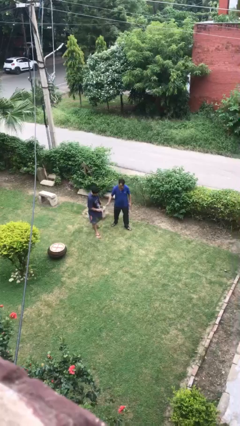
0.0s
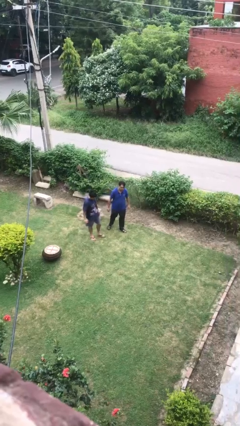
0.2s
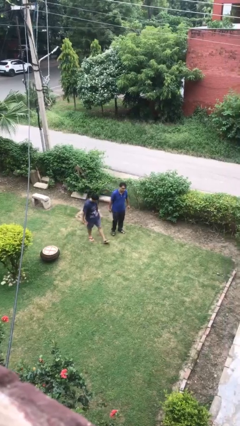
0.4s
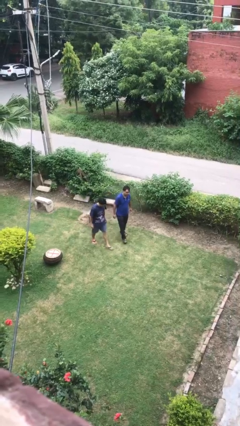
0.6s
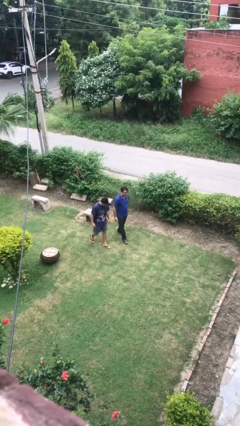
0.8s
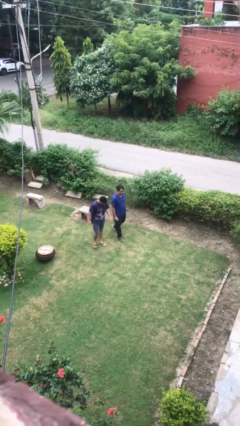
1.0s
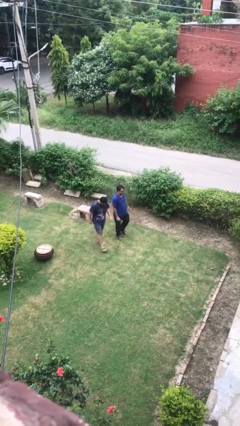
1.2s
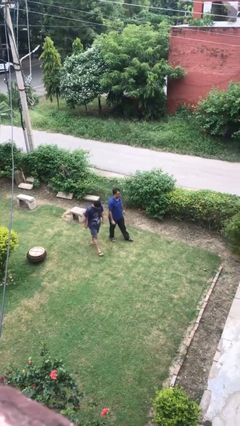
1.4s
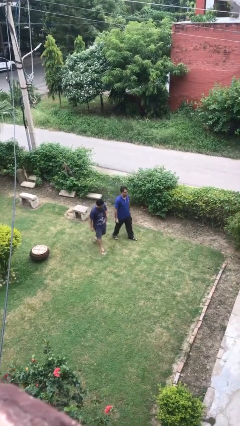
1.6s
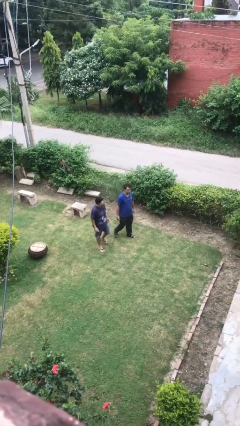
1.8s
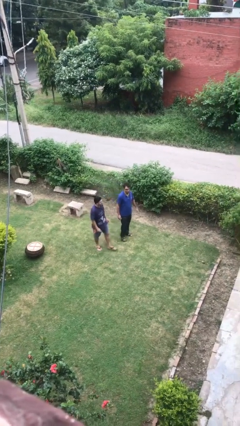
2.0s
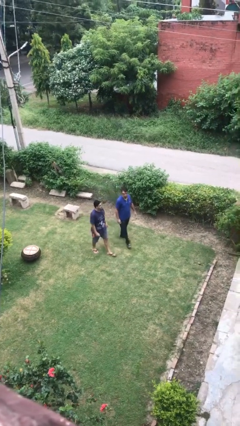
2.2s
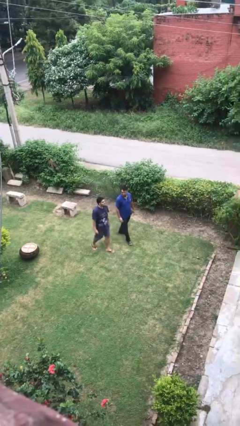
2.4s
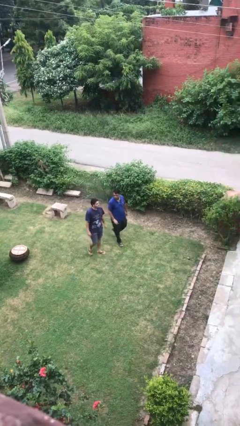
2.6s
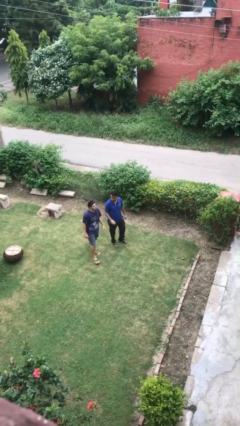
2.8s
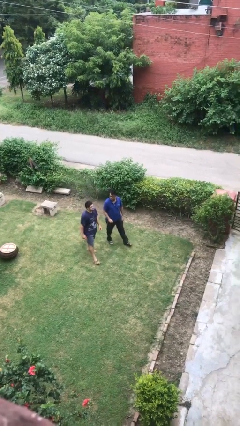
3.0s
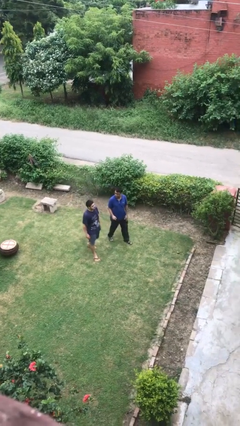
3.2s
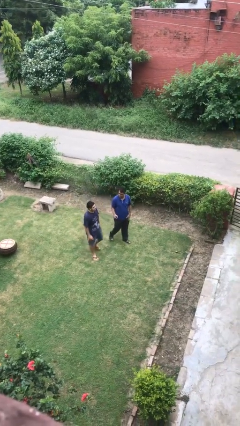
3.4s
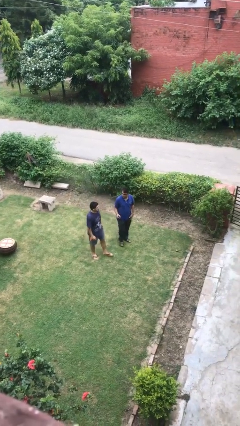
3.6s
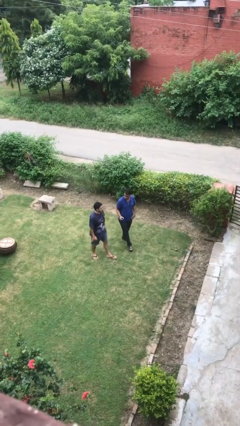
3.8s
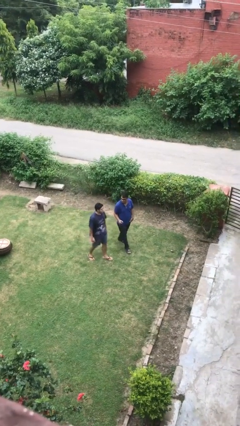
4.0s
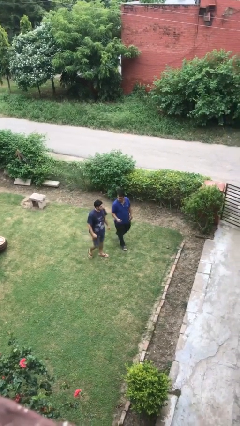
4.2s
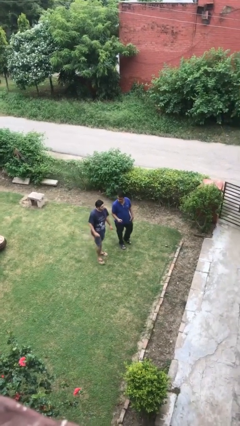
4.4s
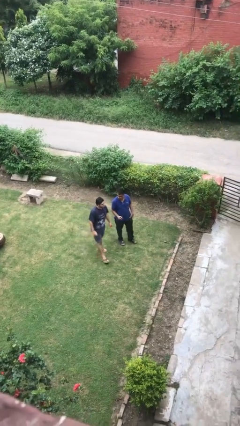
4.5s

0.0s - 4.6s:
person talks to person

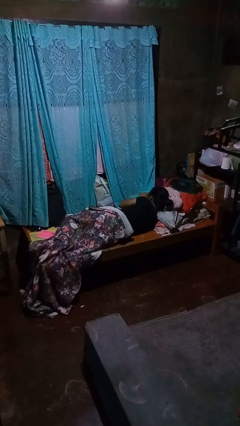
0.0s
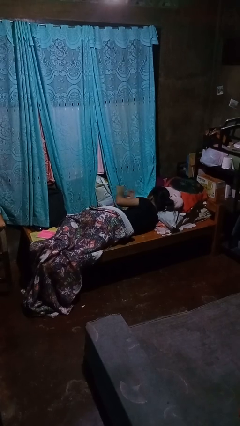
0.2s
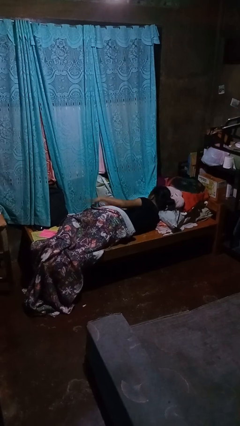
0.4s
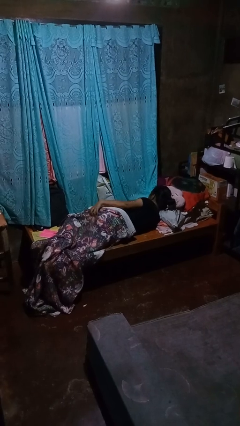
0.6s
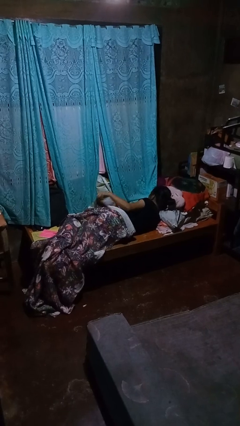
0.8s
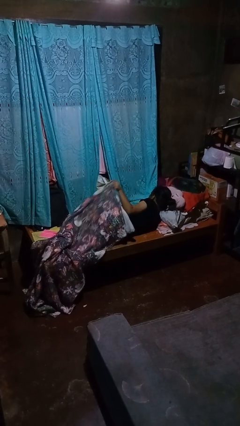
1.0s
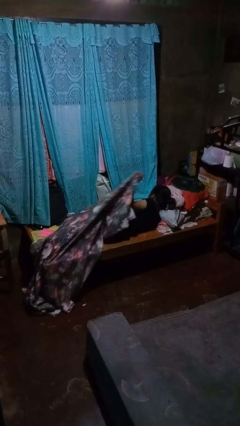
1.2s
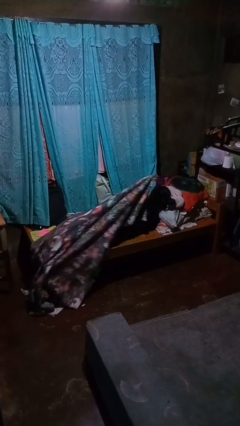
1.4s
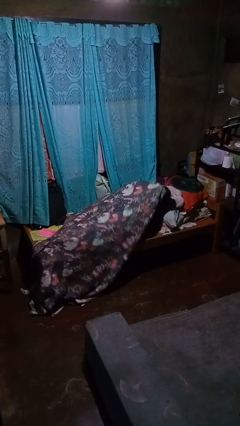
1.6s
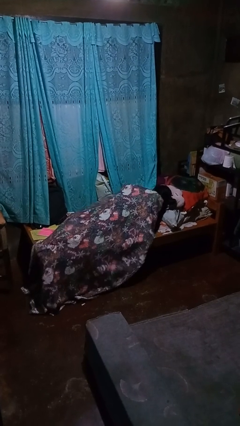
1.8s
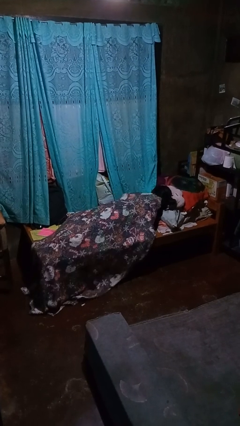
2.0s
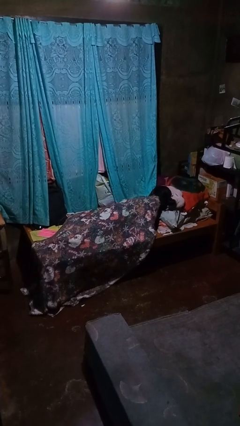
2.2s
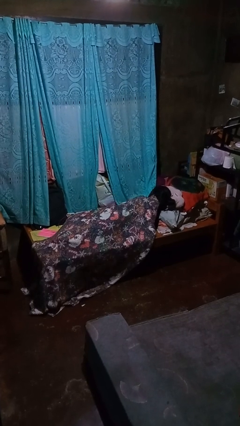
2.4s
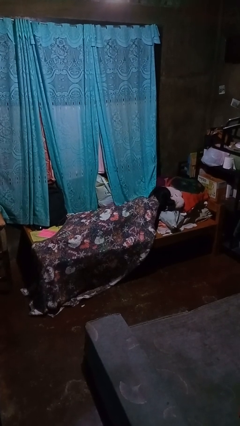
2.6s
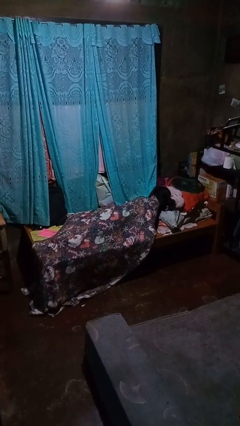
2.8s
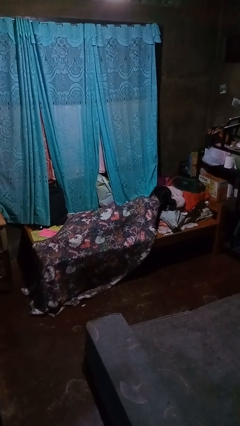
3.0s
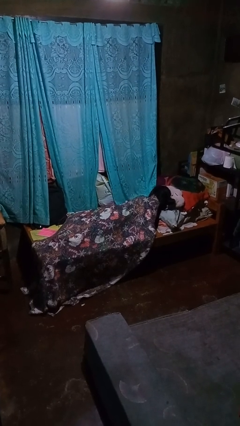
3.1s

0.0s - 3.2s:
person covers with bedsheets

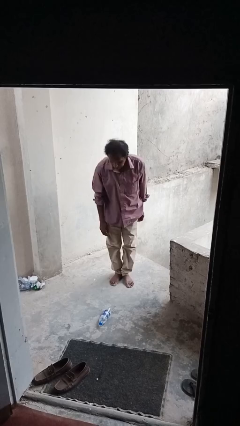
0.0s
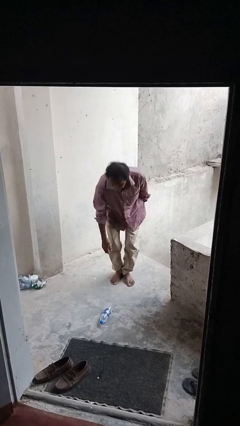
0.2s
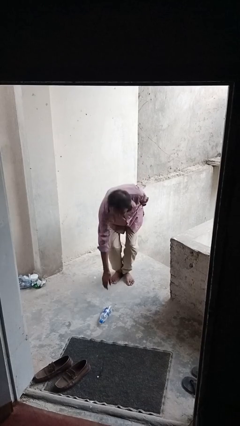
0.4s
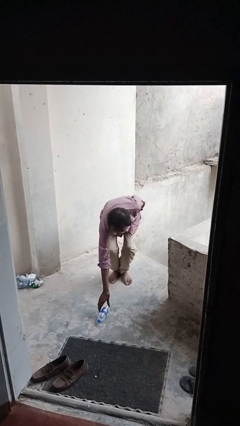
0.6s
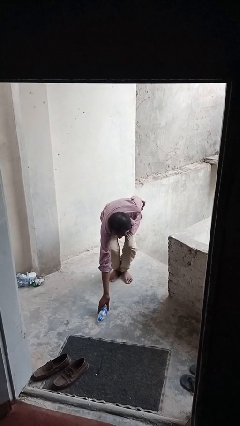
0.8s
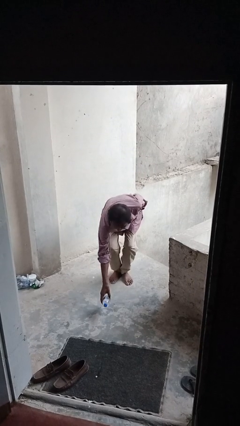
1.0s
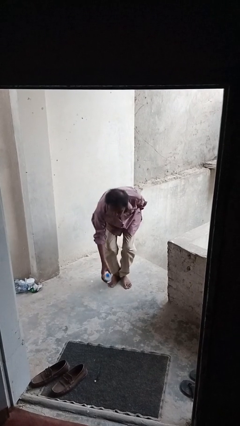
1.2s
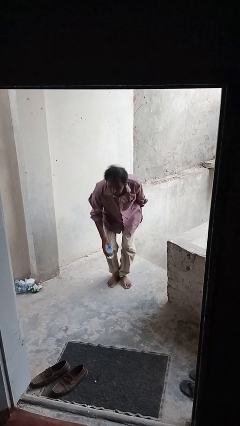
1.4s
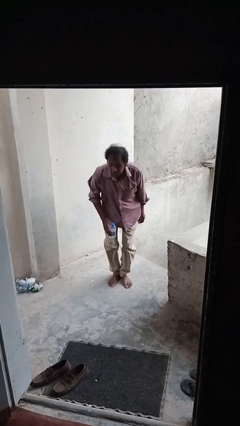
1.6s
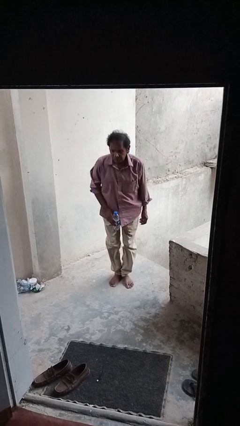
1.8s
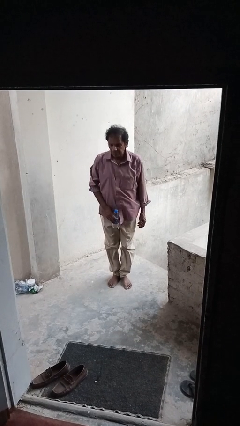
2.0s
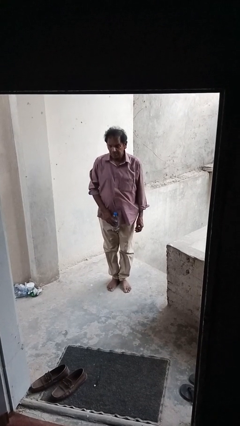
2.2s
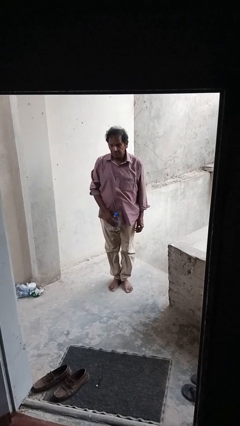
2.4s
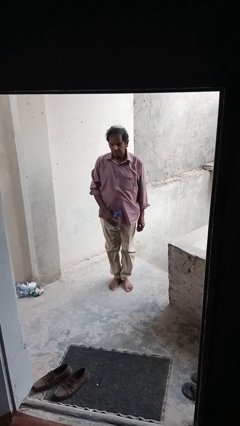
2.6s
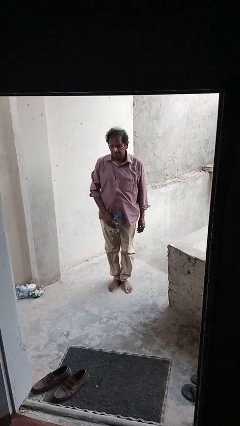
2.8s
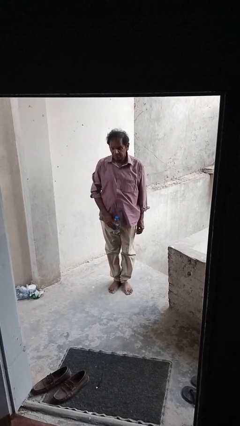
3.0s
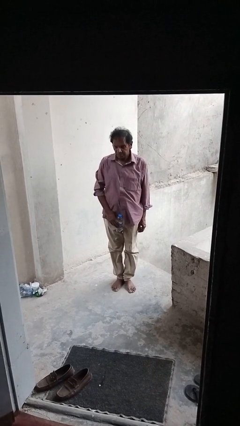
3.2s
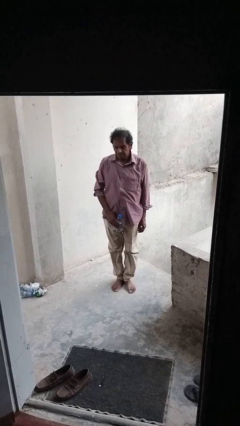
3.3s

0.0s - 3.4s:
person picks up object from floor

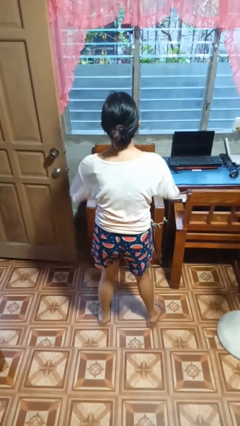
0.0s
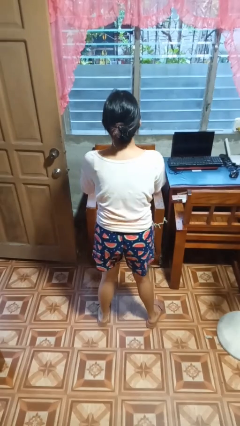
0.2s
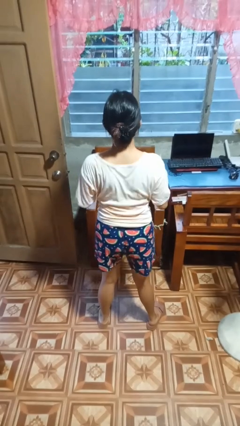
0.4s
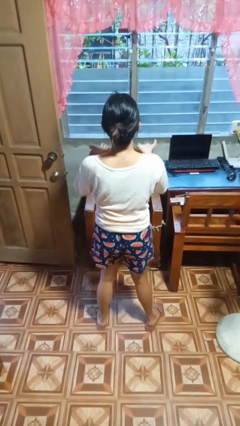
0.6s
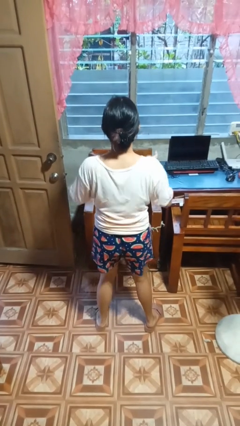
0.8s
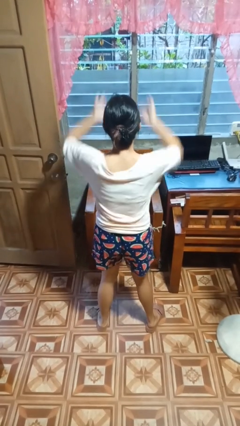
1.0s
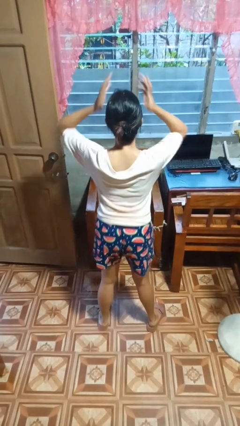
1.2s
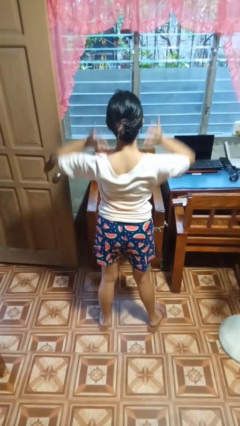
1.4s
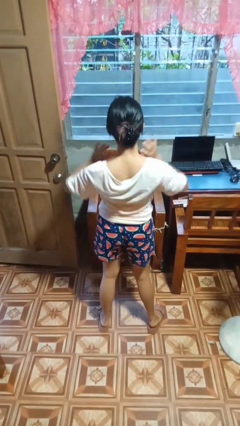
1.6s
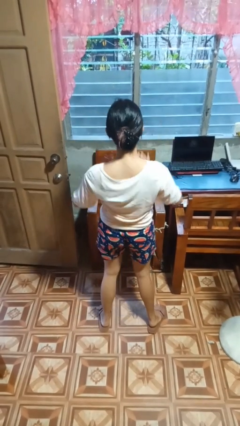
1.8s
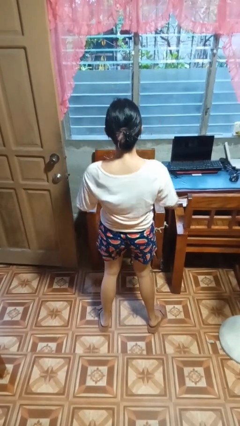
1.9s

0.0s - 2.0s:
person dances in place

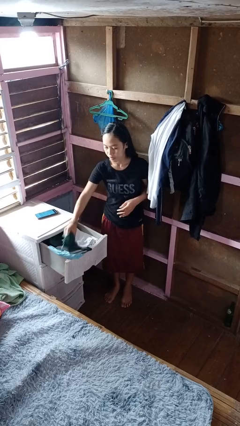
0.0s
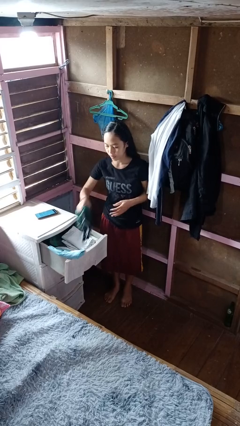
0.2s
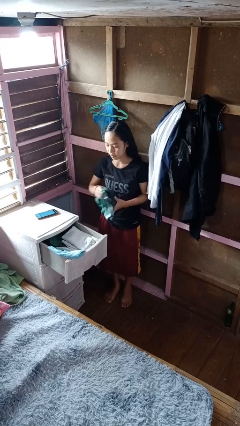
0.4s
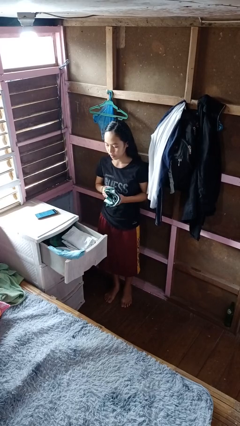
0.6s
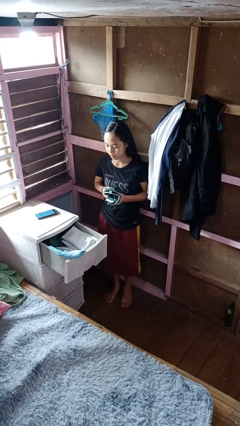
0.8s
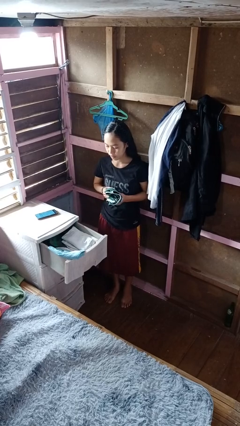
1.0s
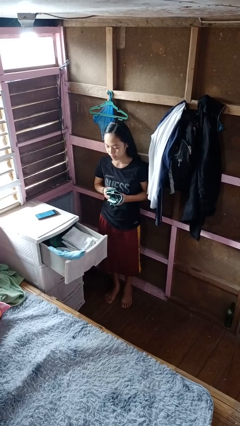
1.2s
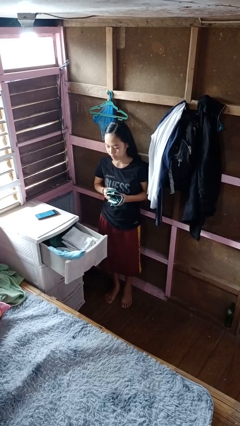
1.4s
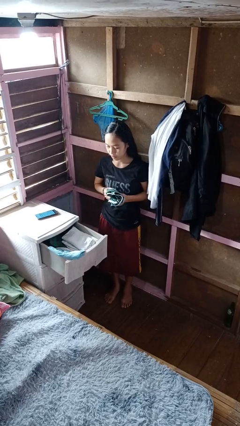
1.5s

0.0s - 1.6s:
person takes clothes from dresser

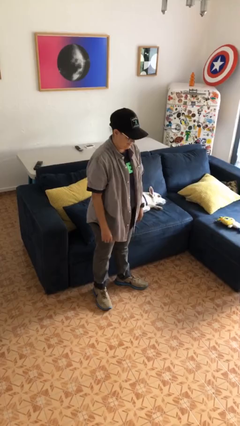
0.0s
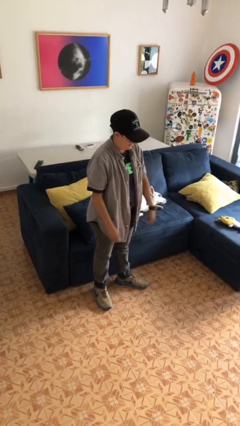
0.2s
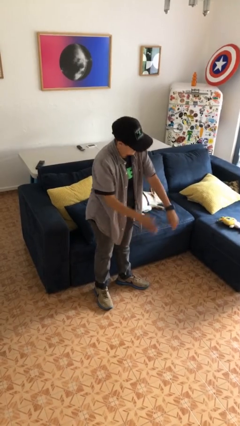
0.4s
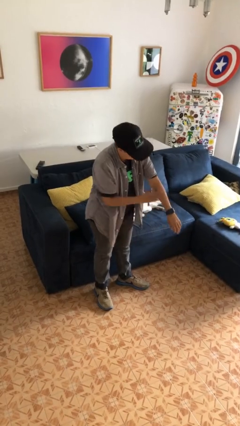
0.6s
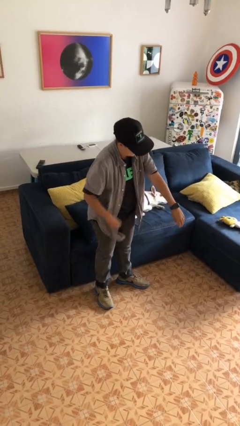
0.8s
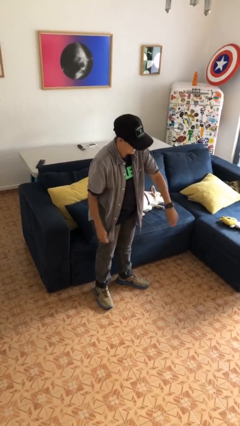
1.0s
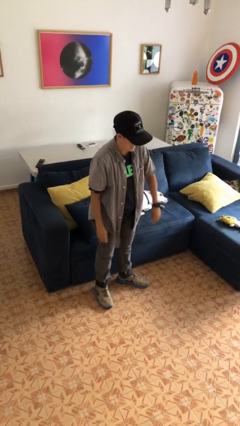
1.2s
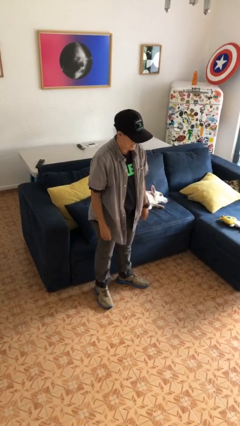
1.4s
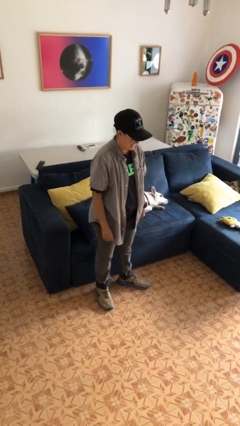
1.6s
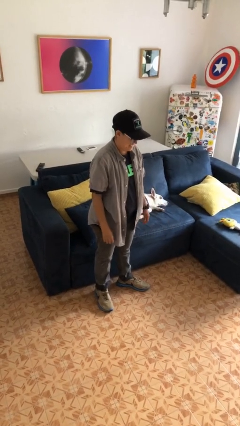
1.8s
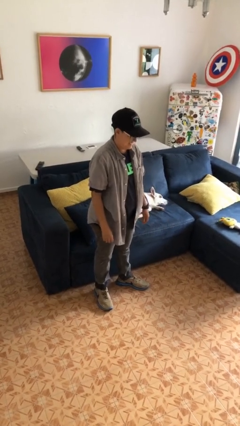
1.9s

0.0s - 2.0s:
person swats bug

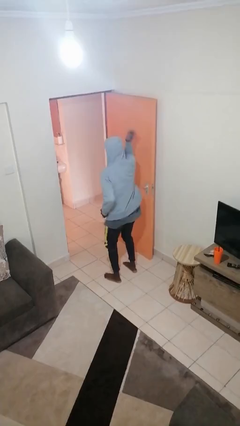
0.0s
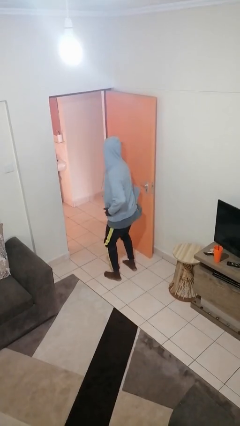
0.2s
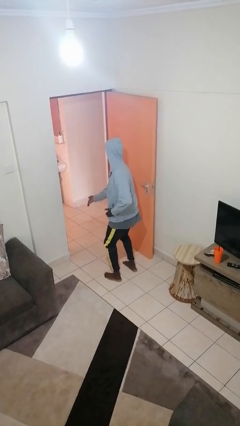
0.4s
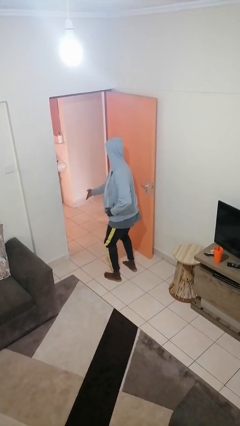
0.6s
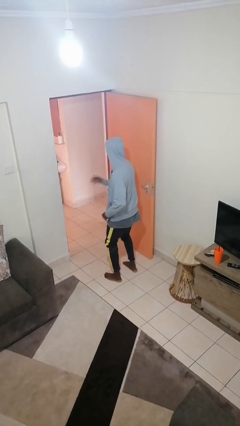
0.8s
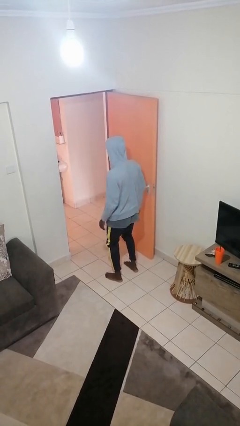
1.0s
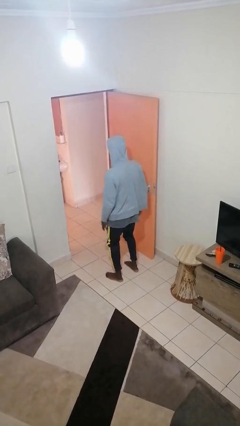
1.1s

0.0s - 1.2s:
person karate chop
